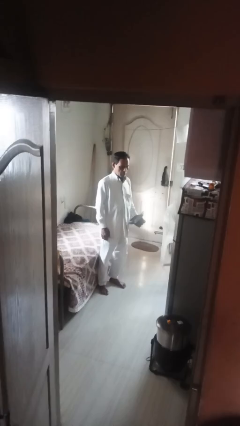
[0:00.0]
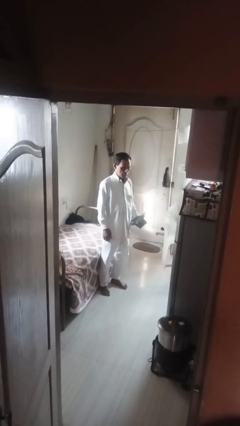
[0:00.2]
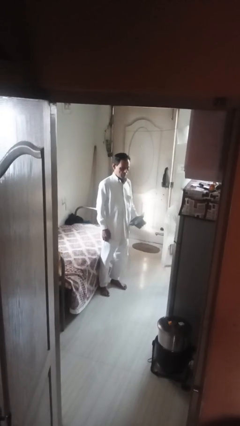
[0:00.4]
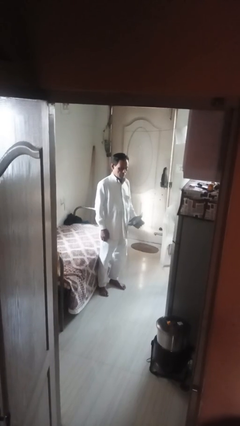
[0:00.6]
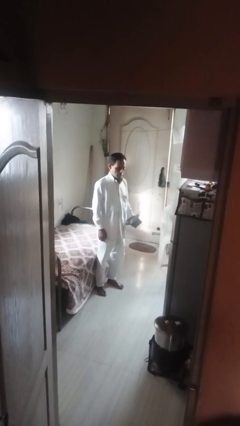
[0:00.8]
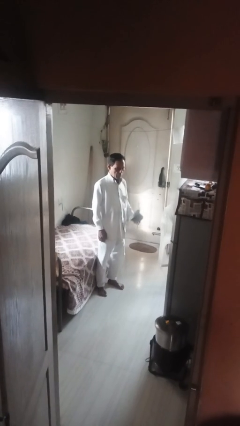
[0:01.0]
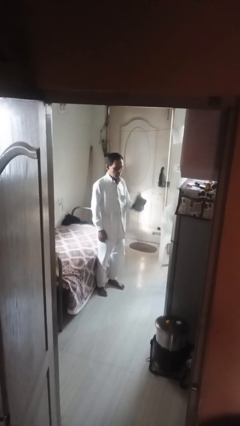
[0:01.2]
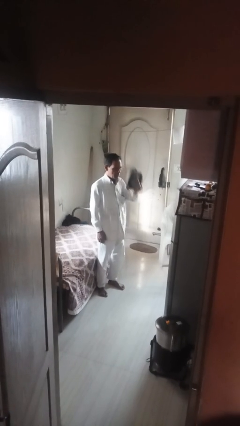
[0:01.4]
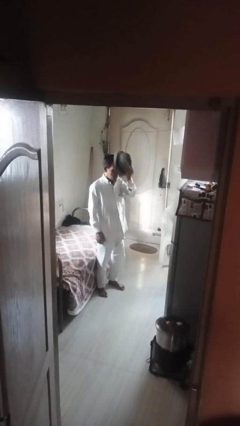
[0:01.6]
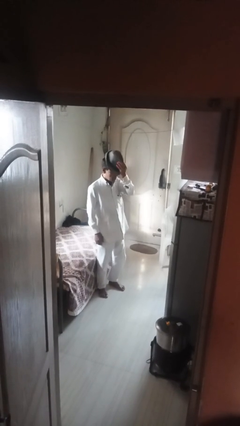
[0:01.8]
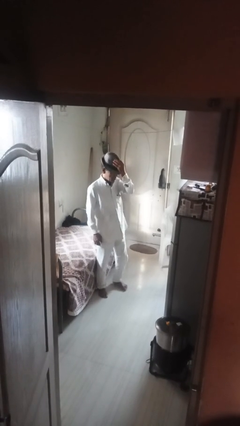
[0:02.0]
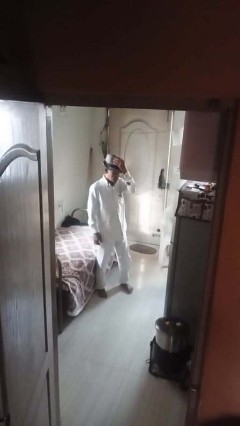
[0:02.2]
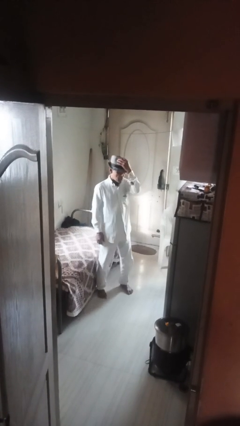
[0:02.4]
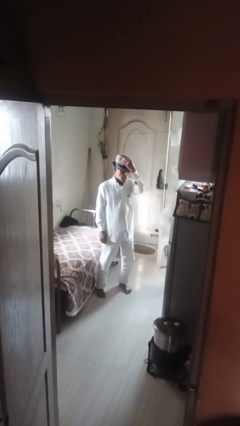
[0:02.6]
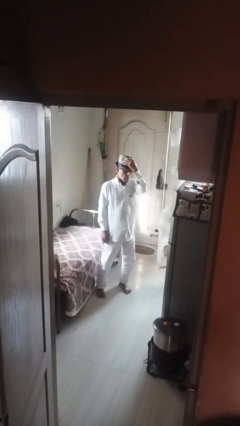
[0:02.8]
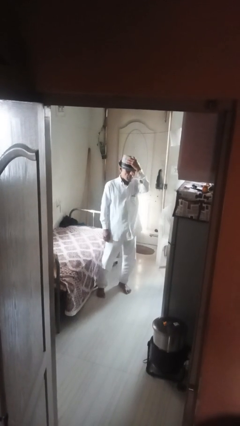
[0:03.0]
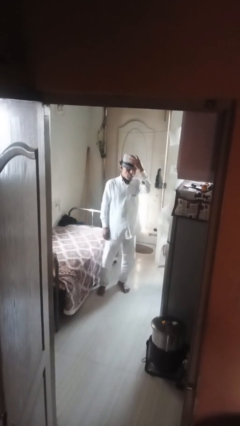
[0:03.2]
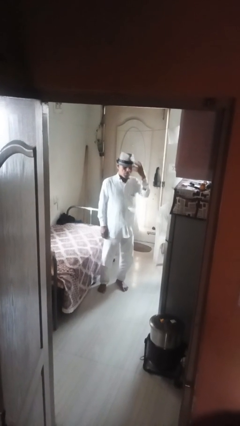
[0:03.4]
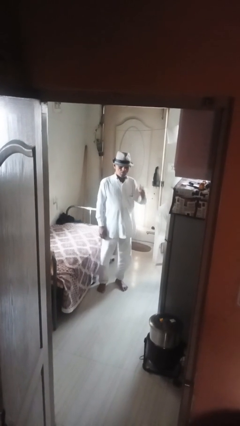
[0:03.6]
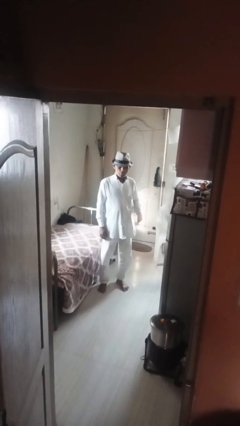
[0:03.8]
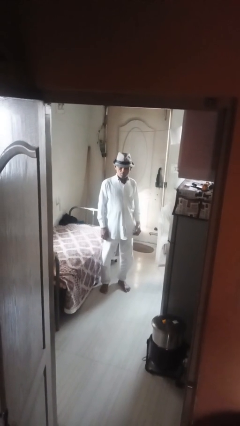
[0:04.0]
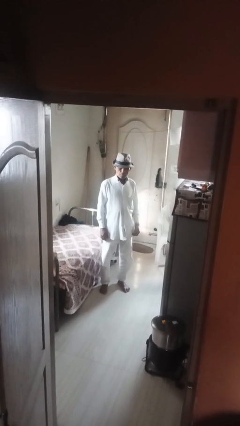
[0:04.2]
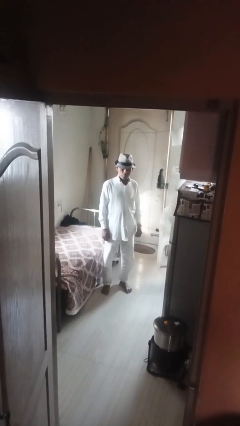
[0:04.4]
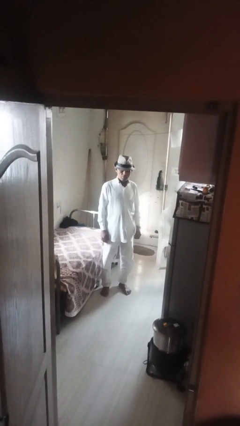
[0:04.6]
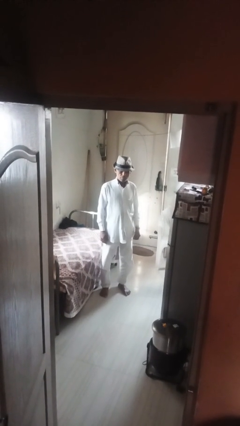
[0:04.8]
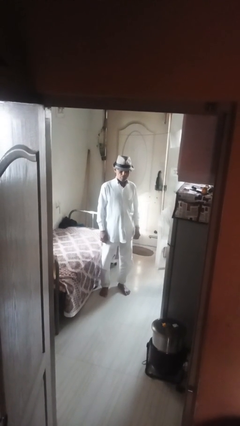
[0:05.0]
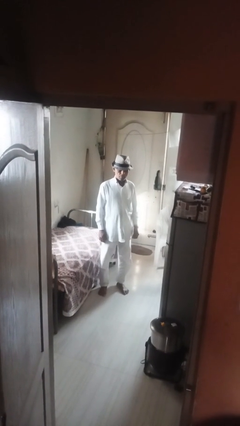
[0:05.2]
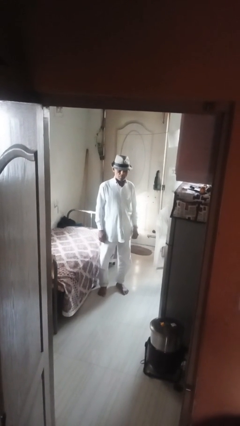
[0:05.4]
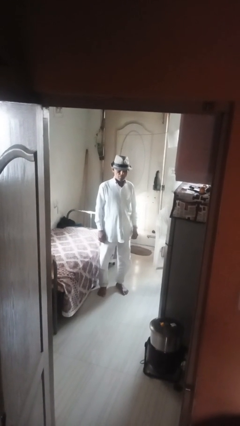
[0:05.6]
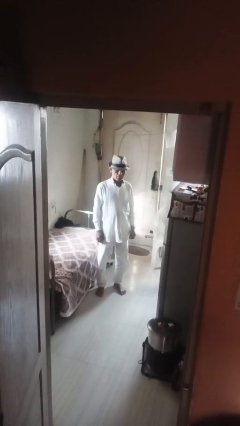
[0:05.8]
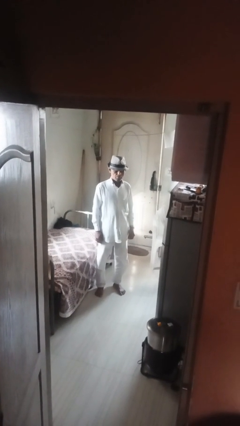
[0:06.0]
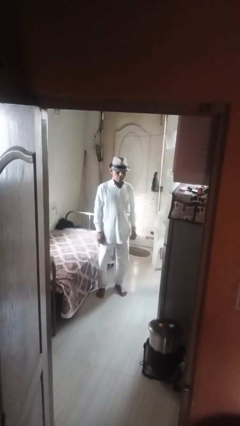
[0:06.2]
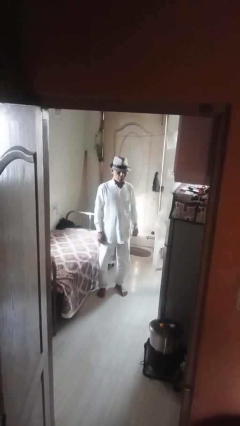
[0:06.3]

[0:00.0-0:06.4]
person puts on hat

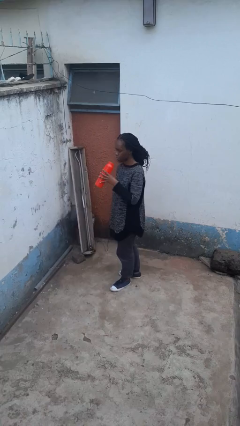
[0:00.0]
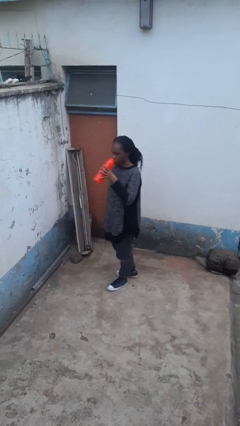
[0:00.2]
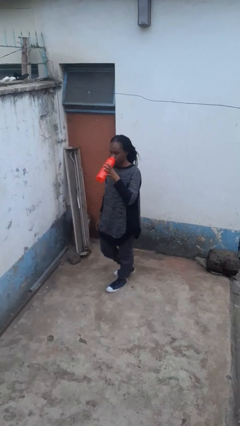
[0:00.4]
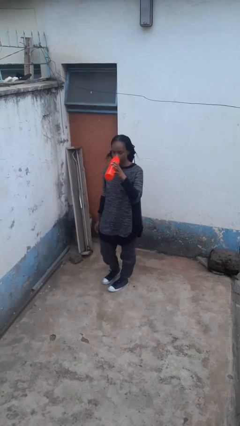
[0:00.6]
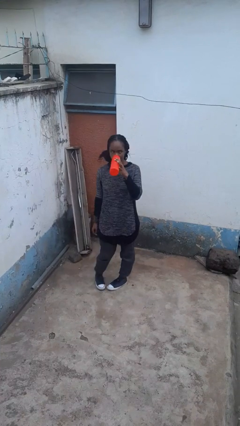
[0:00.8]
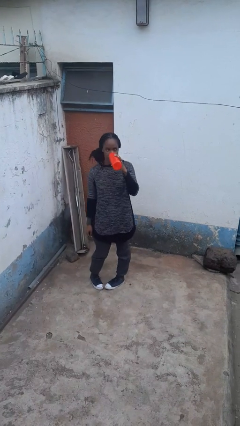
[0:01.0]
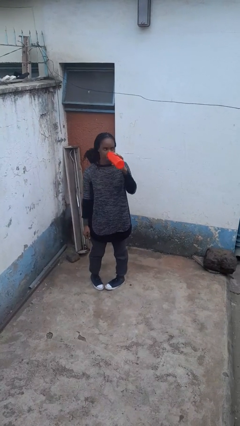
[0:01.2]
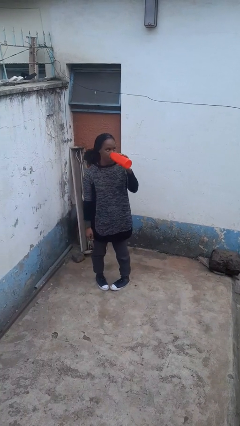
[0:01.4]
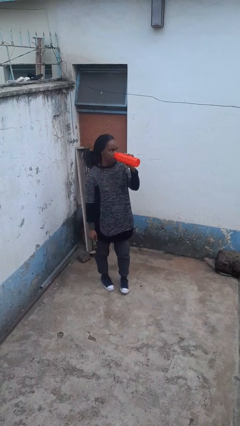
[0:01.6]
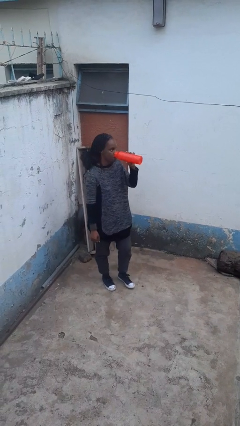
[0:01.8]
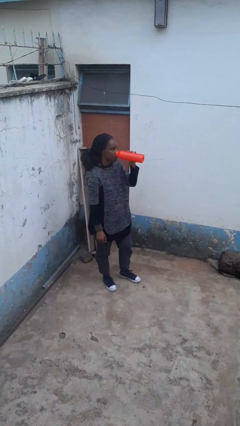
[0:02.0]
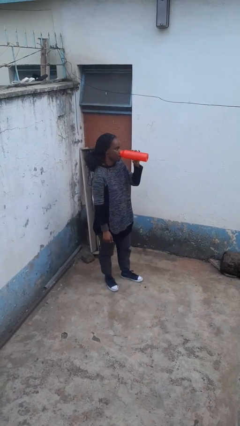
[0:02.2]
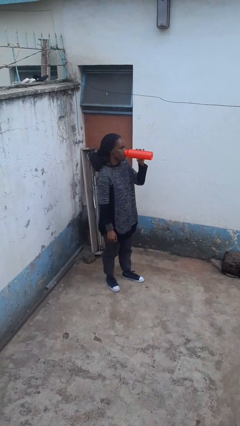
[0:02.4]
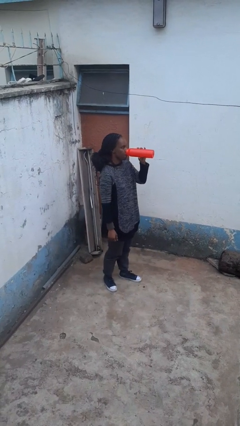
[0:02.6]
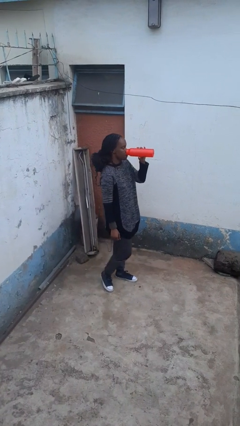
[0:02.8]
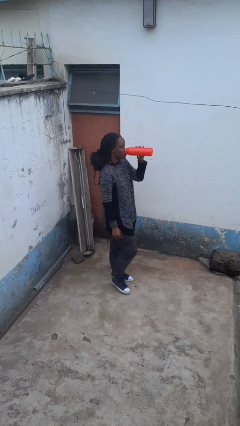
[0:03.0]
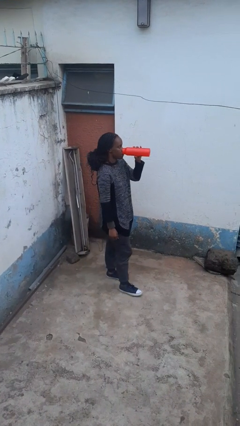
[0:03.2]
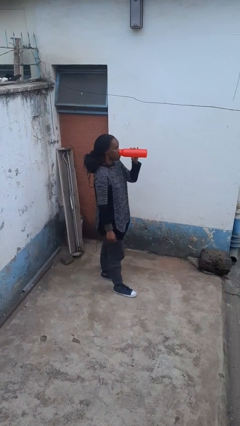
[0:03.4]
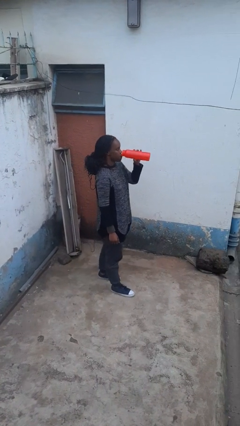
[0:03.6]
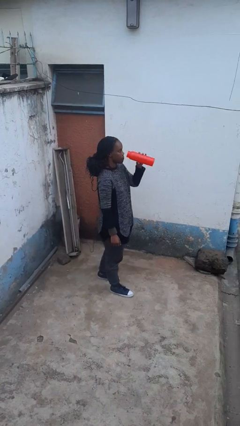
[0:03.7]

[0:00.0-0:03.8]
person drinks from bottle

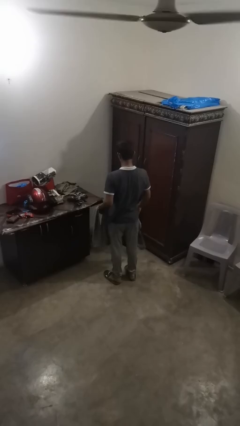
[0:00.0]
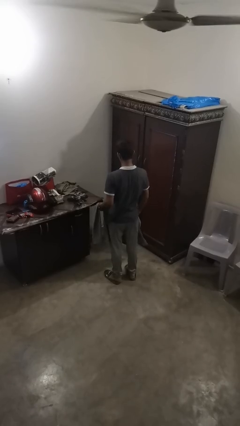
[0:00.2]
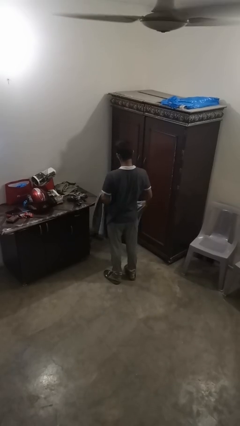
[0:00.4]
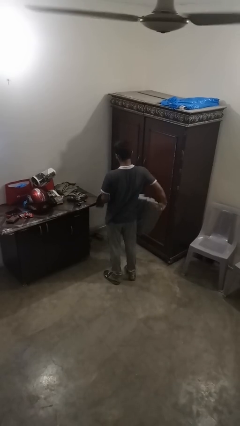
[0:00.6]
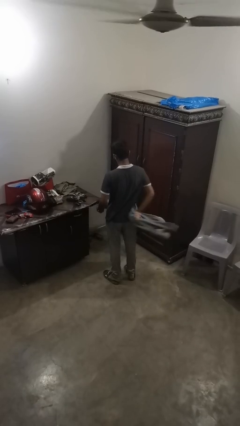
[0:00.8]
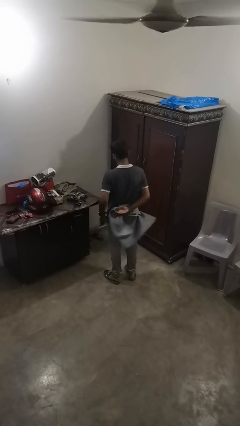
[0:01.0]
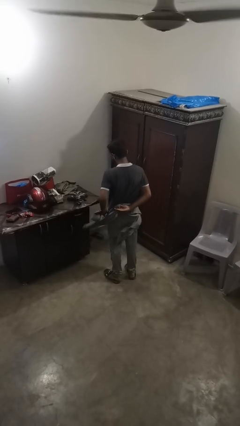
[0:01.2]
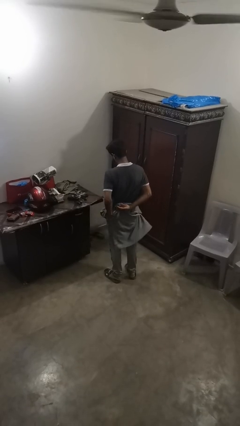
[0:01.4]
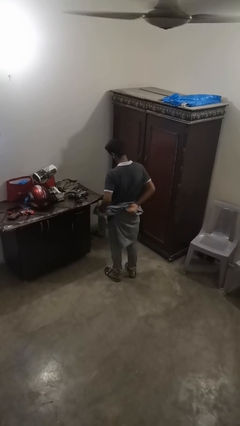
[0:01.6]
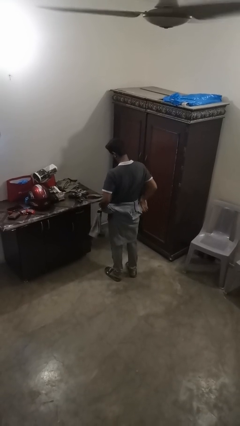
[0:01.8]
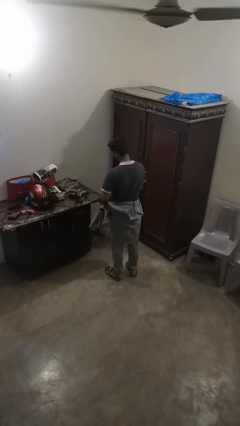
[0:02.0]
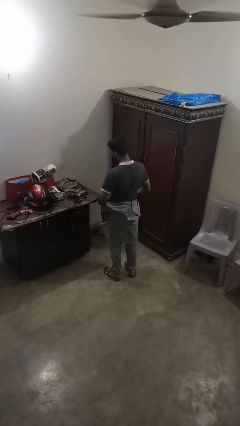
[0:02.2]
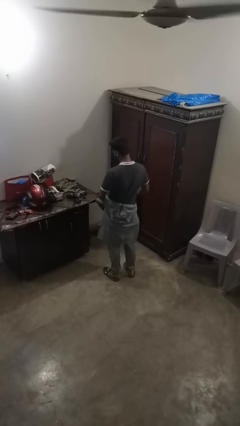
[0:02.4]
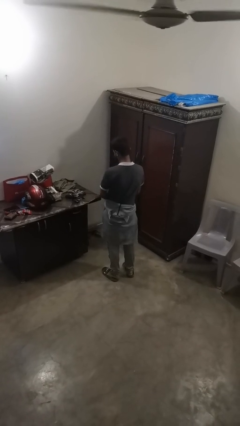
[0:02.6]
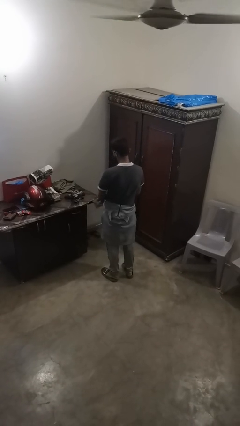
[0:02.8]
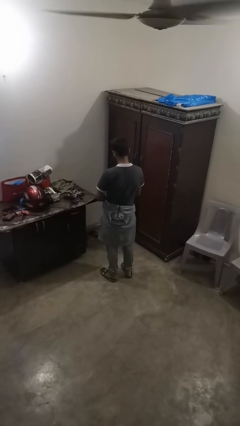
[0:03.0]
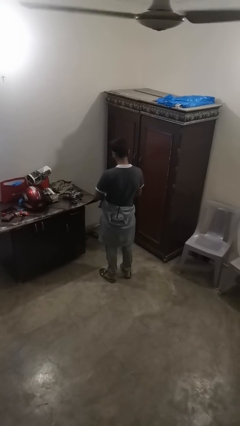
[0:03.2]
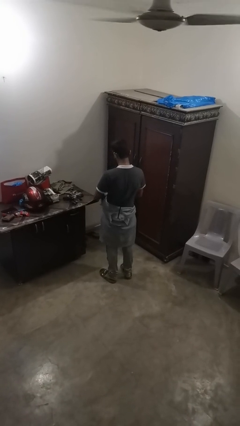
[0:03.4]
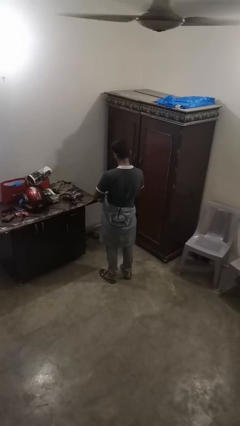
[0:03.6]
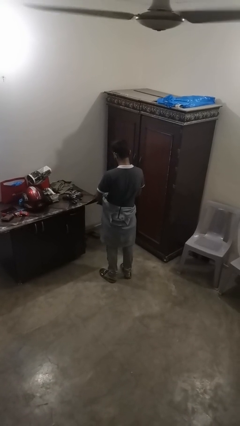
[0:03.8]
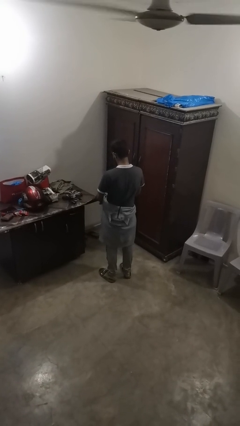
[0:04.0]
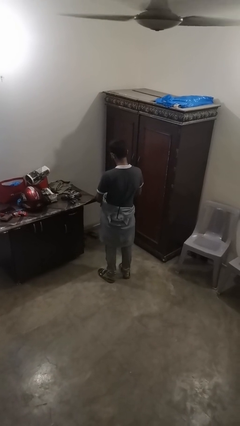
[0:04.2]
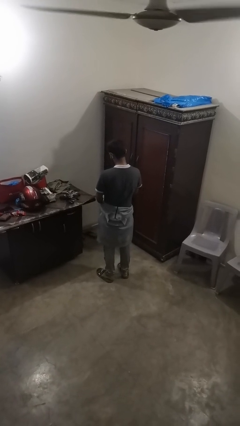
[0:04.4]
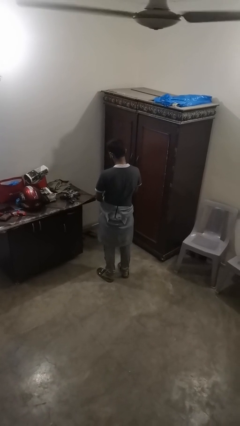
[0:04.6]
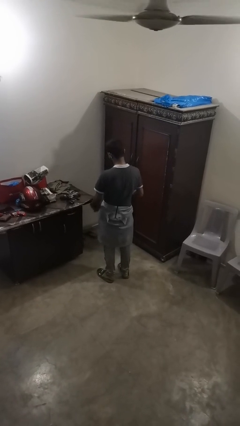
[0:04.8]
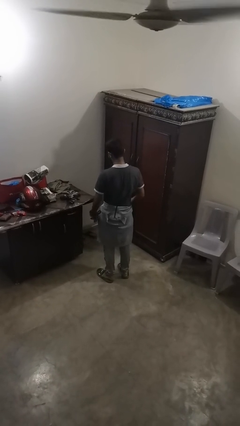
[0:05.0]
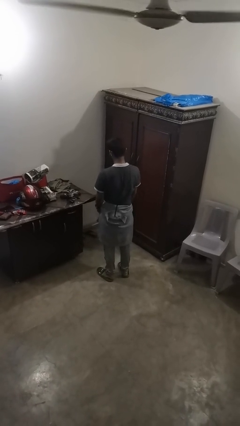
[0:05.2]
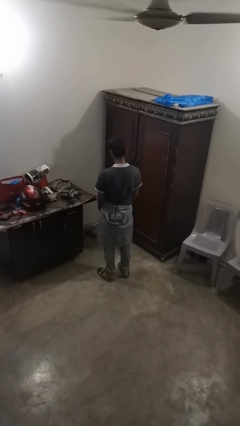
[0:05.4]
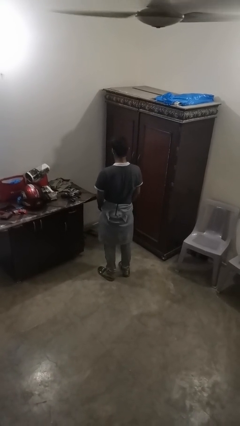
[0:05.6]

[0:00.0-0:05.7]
person ties jacket around waist

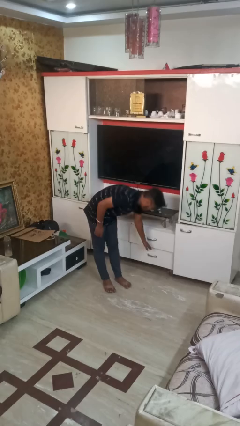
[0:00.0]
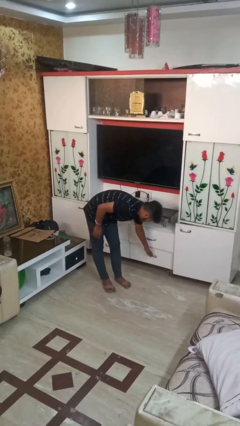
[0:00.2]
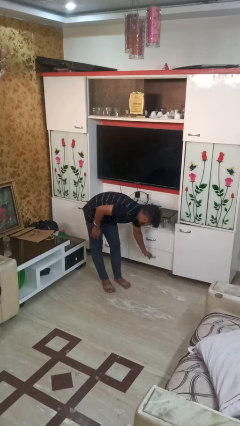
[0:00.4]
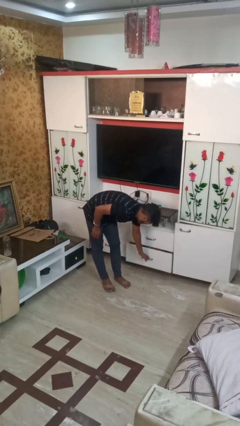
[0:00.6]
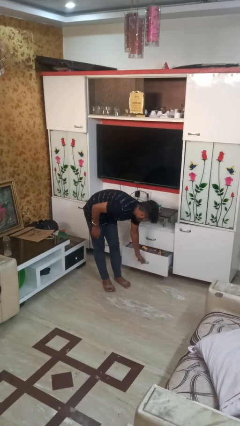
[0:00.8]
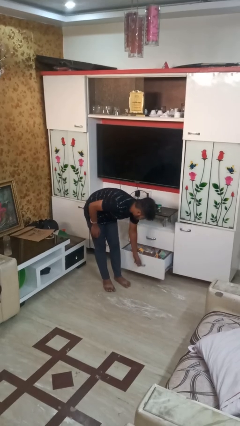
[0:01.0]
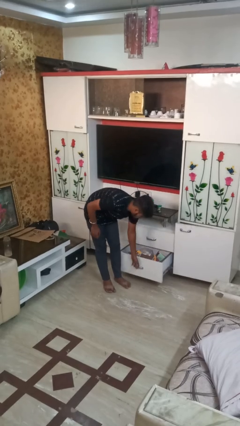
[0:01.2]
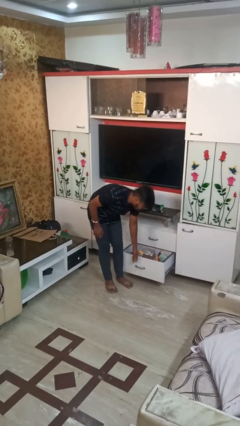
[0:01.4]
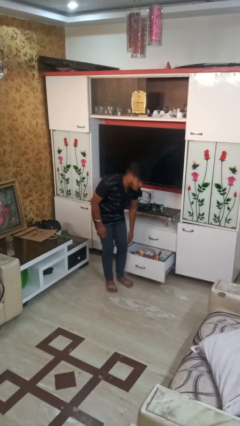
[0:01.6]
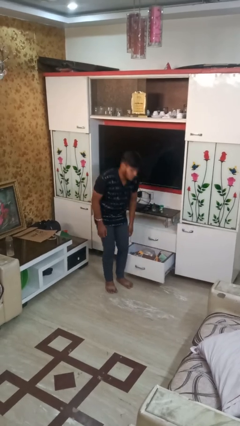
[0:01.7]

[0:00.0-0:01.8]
person opens dresser drawer
